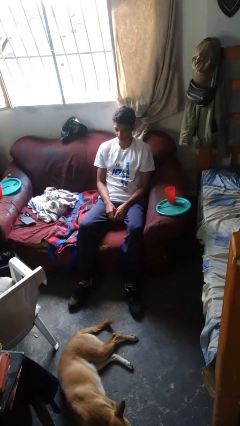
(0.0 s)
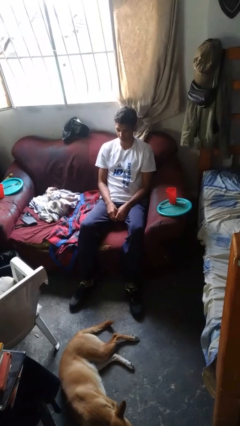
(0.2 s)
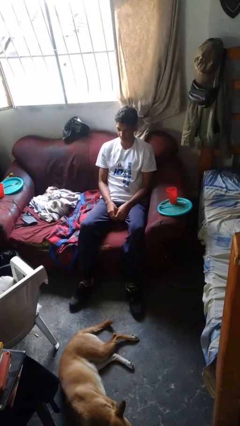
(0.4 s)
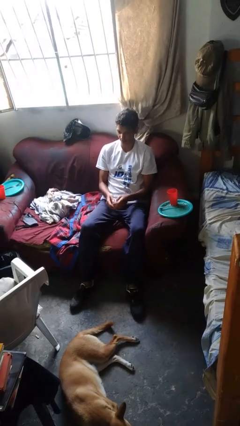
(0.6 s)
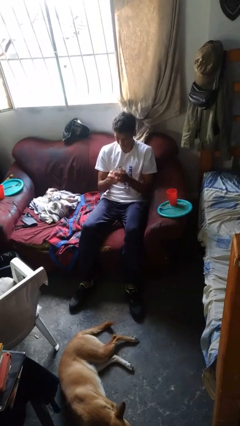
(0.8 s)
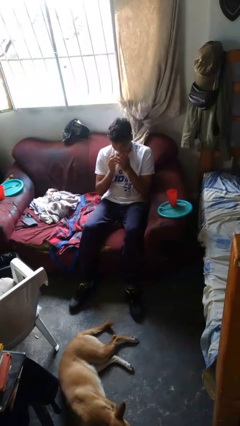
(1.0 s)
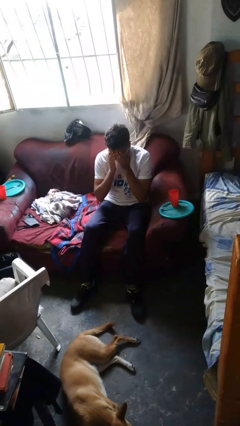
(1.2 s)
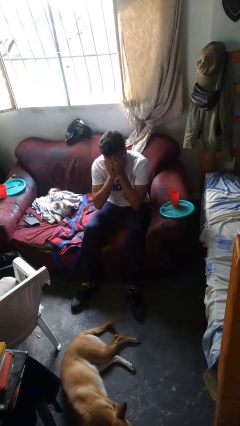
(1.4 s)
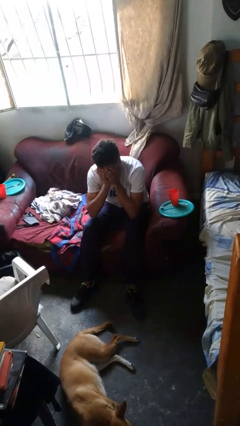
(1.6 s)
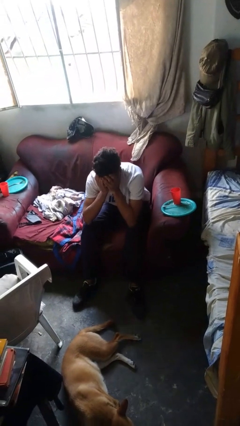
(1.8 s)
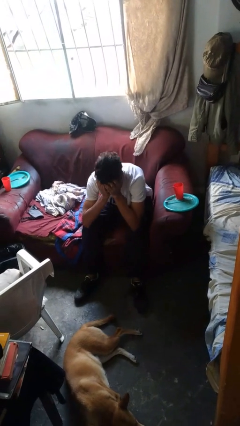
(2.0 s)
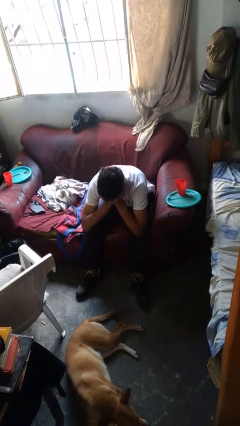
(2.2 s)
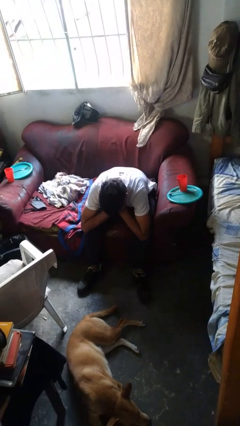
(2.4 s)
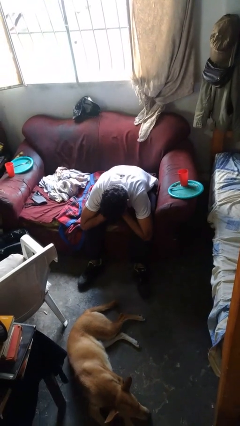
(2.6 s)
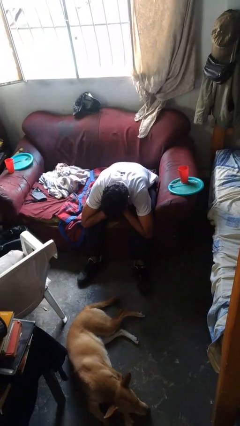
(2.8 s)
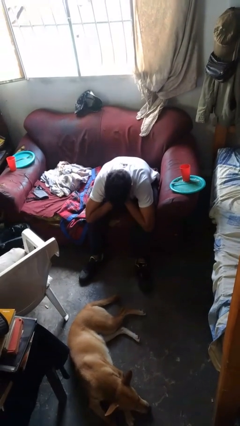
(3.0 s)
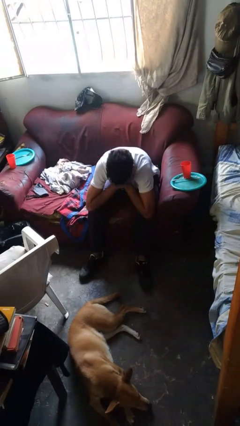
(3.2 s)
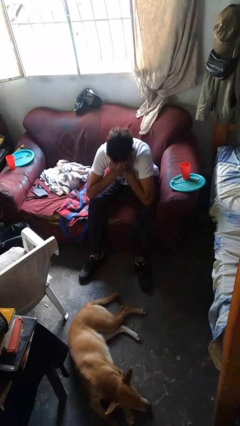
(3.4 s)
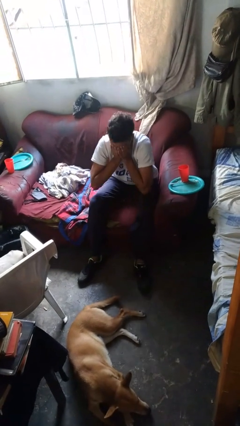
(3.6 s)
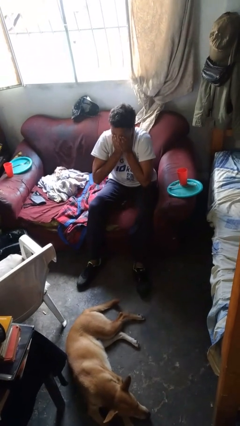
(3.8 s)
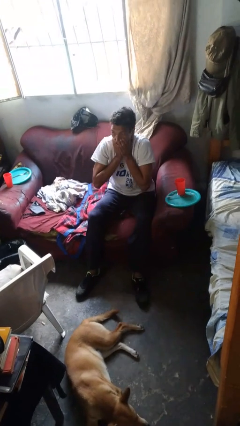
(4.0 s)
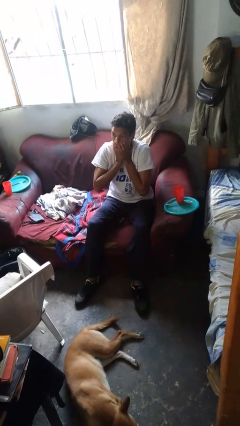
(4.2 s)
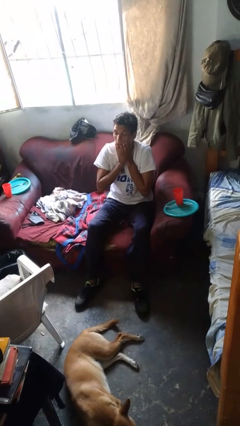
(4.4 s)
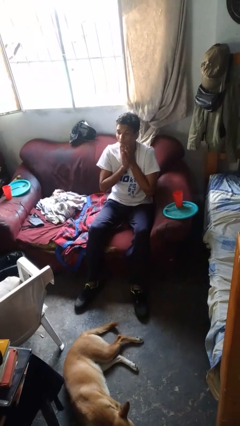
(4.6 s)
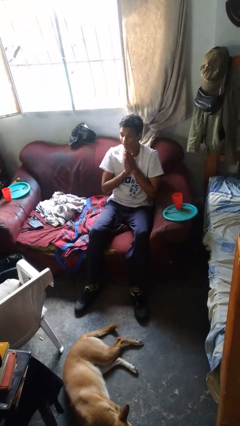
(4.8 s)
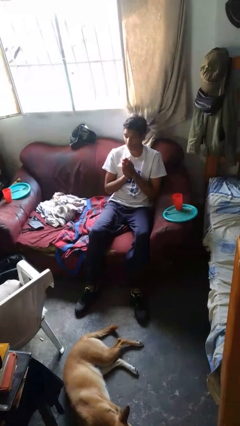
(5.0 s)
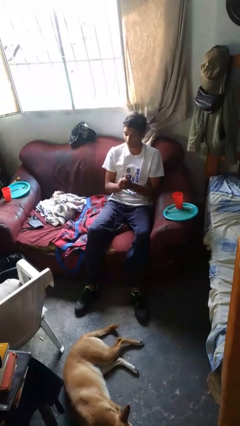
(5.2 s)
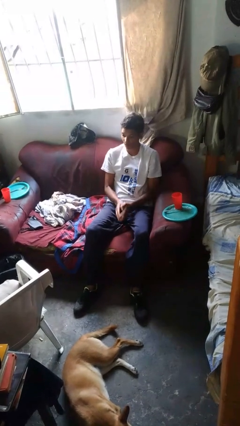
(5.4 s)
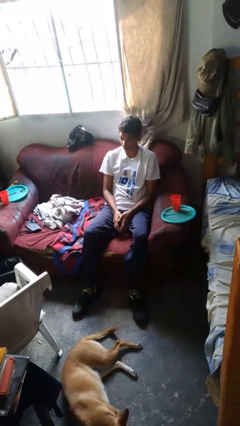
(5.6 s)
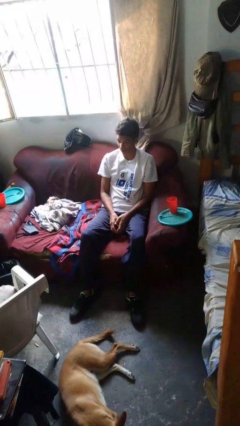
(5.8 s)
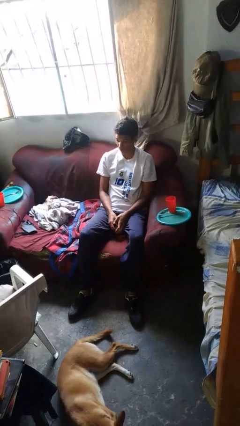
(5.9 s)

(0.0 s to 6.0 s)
person covers face with hands

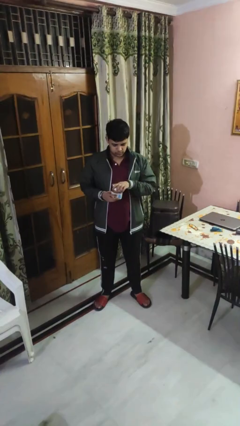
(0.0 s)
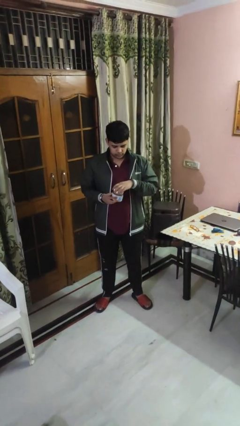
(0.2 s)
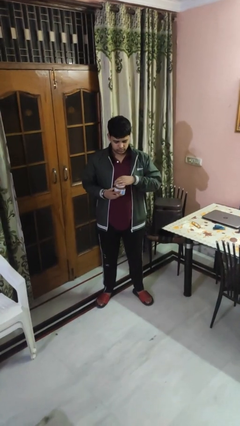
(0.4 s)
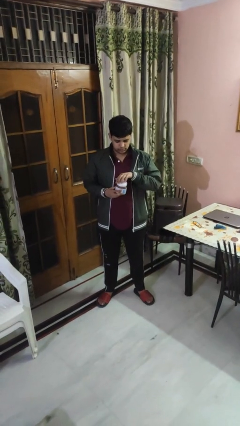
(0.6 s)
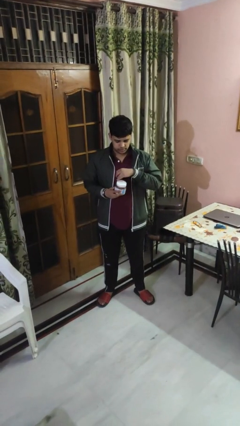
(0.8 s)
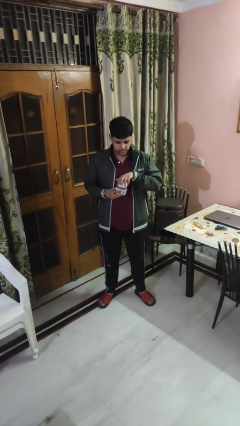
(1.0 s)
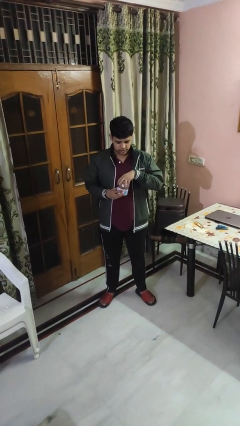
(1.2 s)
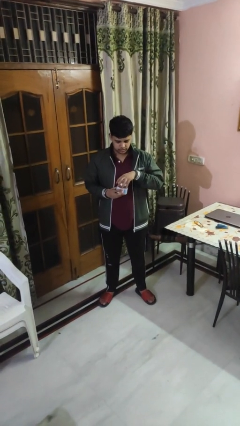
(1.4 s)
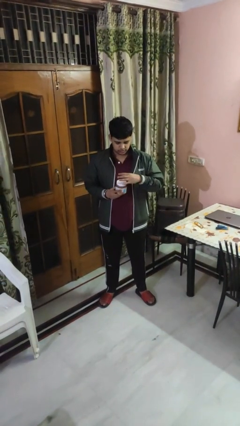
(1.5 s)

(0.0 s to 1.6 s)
person closes jar

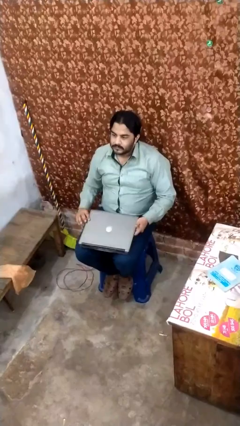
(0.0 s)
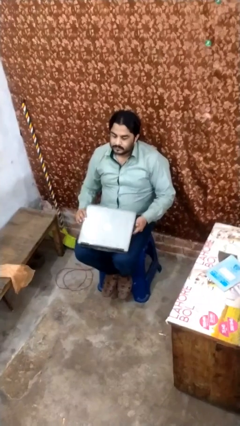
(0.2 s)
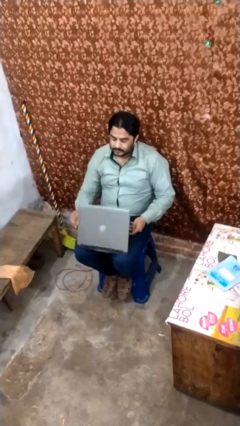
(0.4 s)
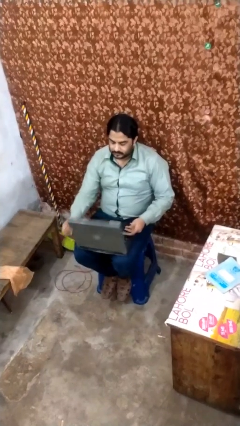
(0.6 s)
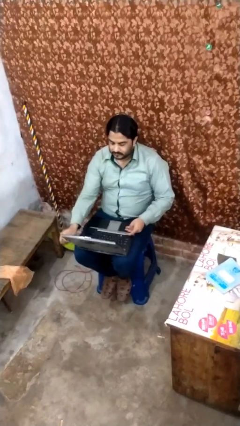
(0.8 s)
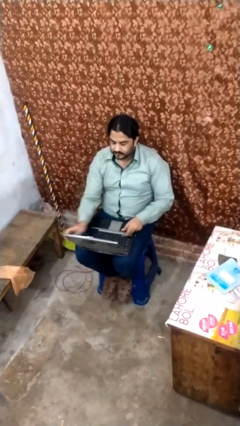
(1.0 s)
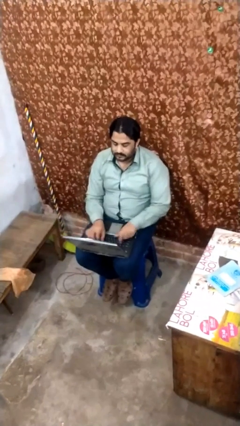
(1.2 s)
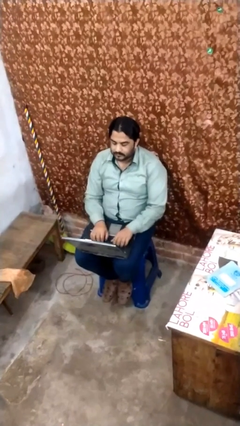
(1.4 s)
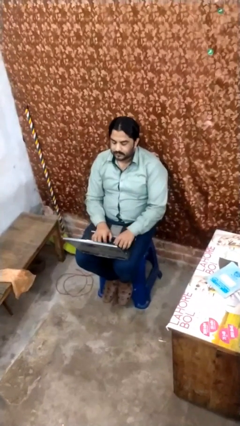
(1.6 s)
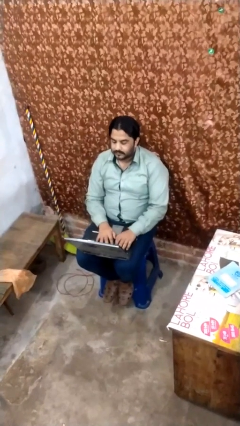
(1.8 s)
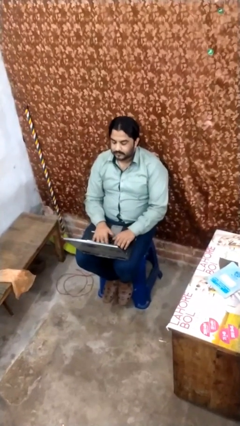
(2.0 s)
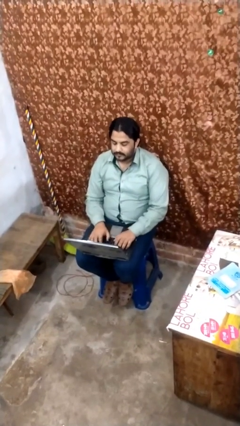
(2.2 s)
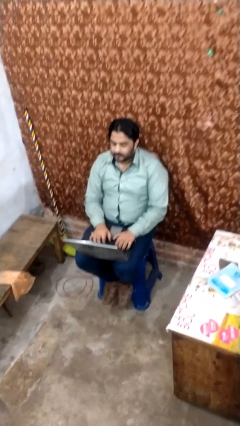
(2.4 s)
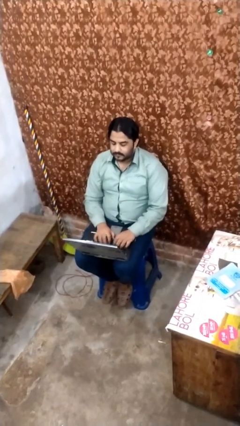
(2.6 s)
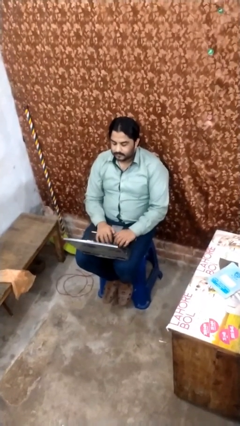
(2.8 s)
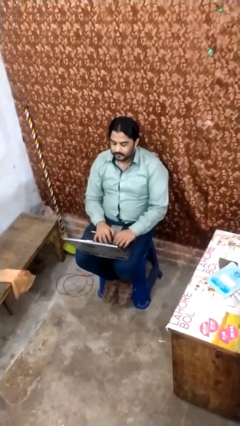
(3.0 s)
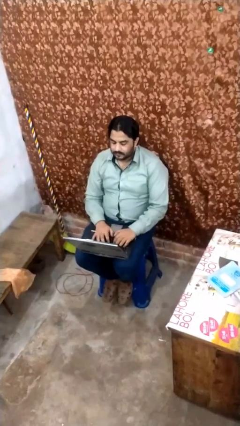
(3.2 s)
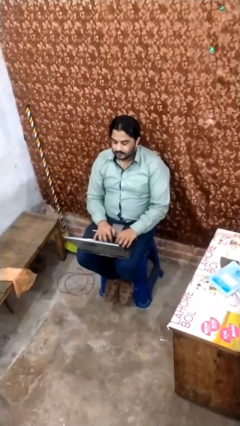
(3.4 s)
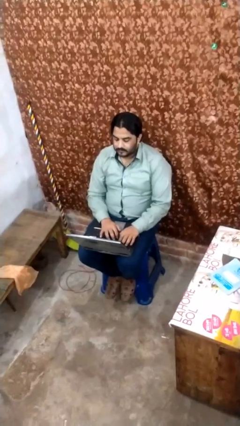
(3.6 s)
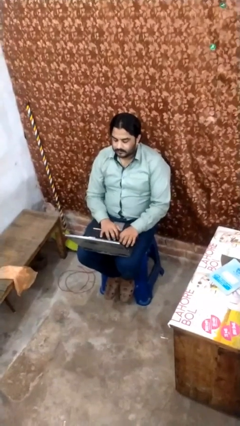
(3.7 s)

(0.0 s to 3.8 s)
person interacts with laptop

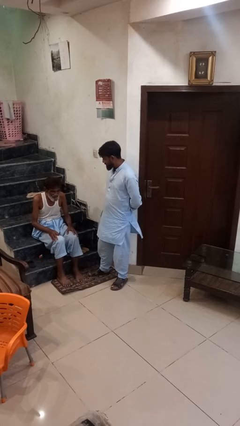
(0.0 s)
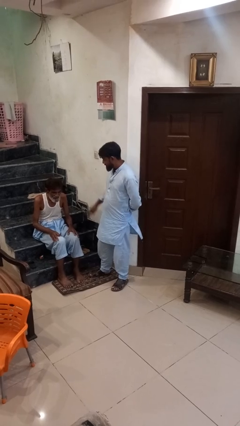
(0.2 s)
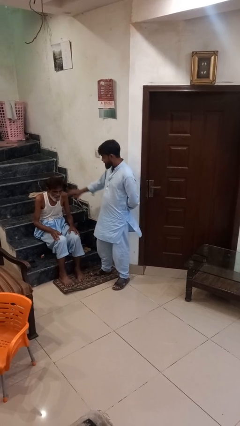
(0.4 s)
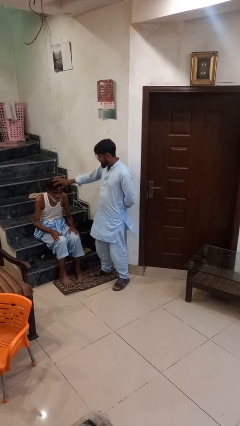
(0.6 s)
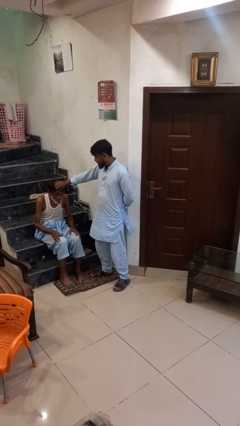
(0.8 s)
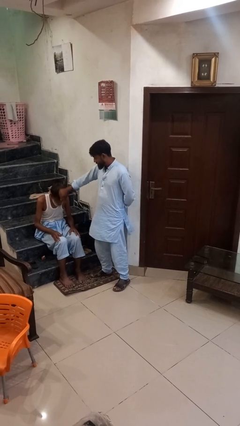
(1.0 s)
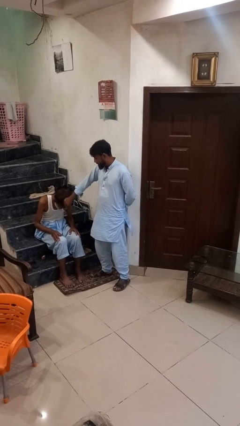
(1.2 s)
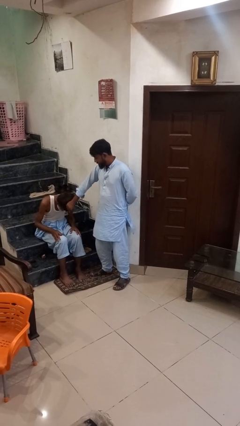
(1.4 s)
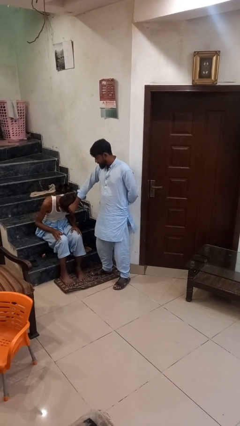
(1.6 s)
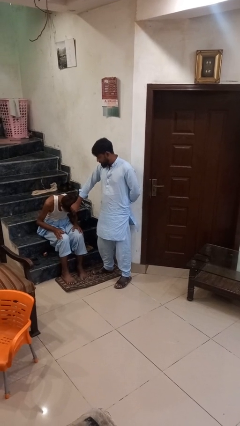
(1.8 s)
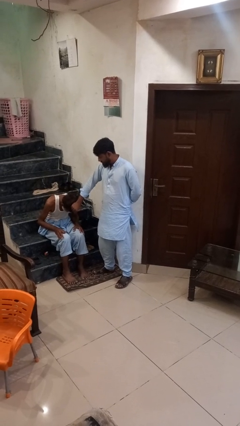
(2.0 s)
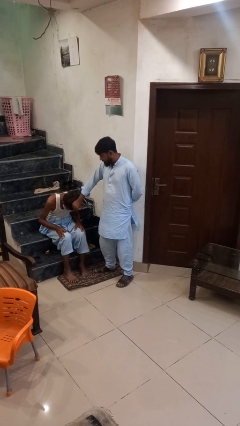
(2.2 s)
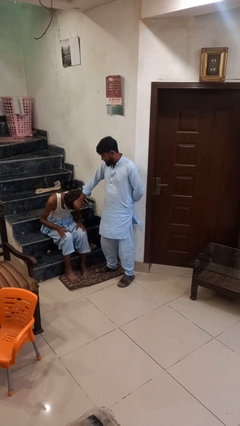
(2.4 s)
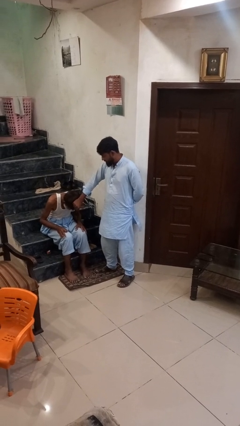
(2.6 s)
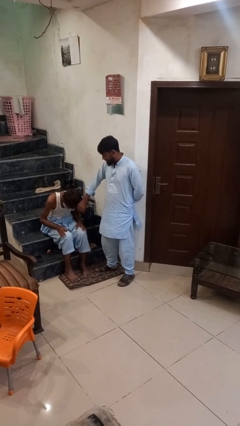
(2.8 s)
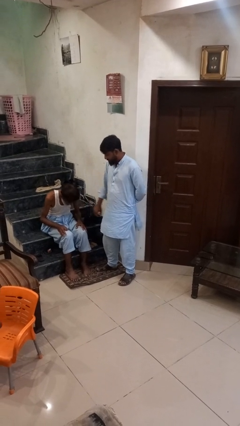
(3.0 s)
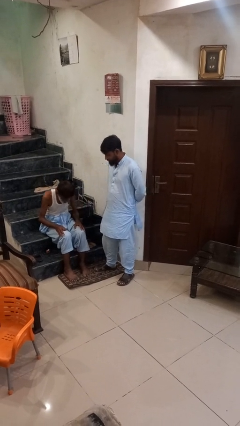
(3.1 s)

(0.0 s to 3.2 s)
person grabs person by hair

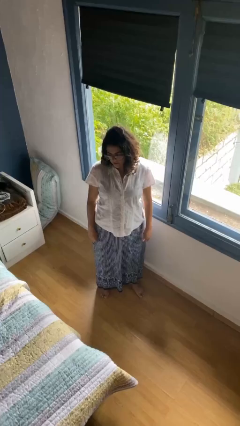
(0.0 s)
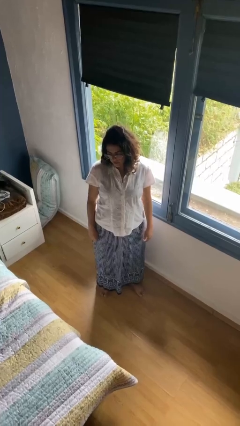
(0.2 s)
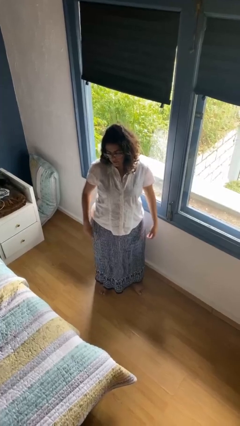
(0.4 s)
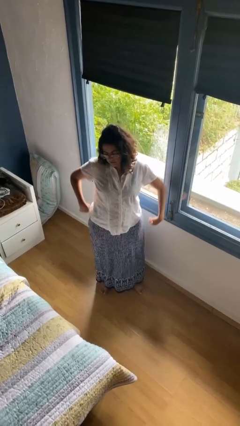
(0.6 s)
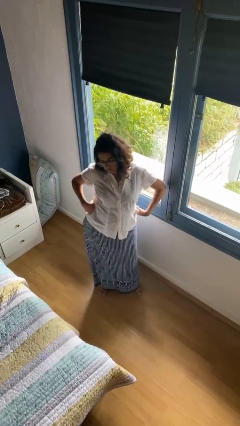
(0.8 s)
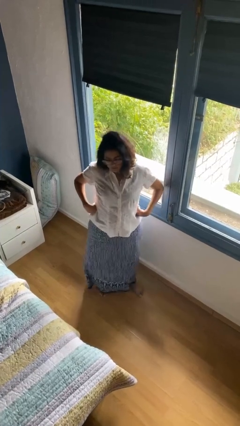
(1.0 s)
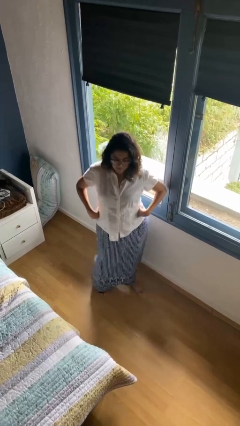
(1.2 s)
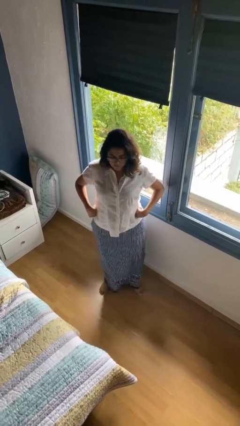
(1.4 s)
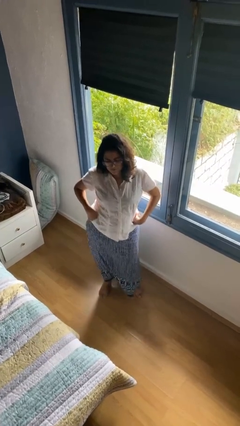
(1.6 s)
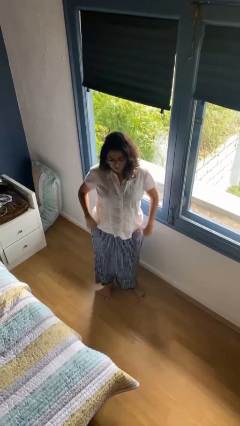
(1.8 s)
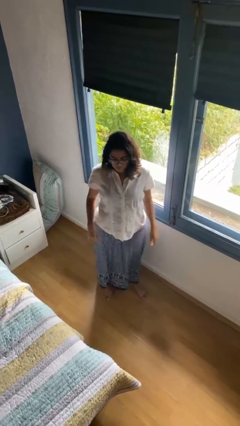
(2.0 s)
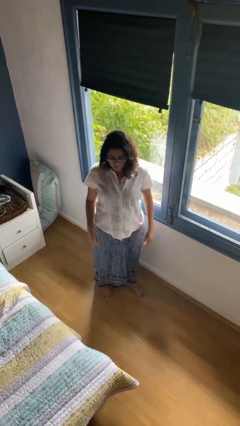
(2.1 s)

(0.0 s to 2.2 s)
person wiggles hips

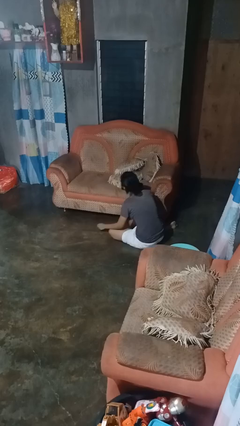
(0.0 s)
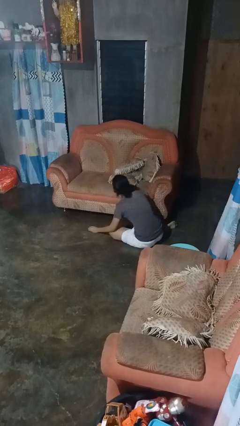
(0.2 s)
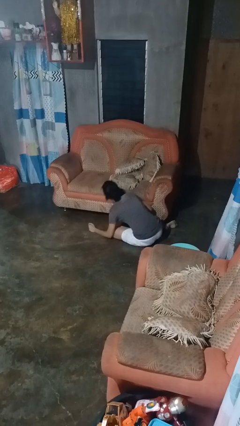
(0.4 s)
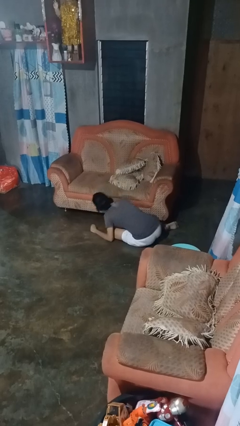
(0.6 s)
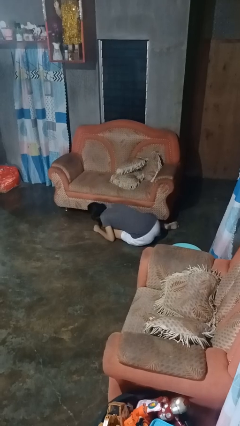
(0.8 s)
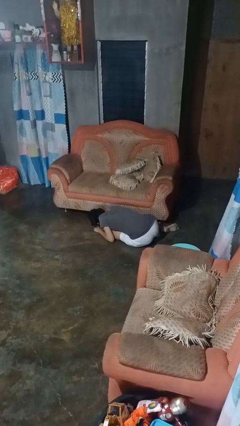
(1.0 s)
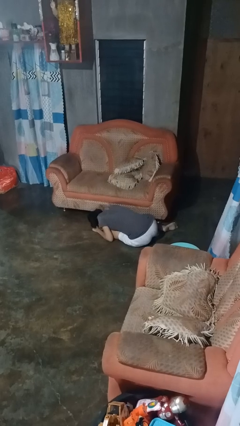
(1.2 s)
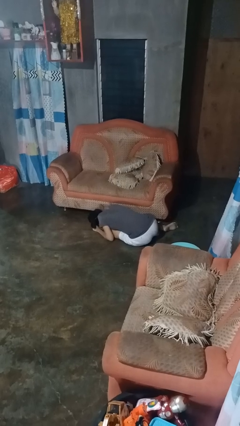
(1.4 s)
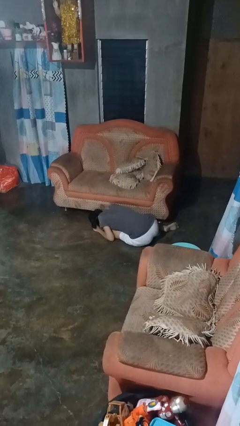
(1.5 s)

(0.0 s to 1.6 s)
person searches under couch
